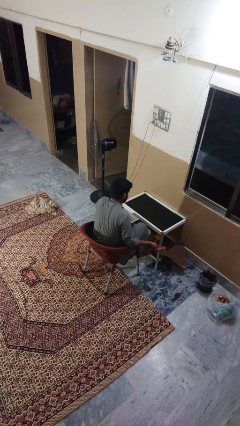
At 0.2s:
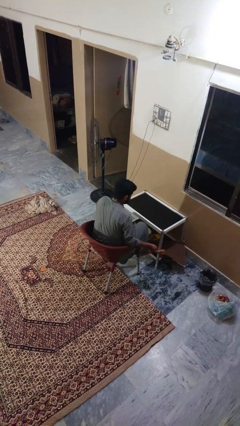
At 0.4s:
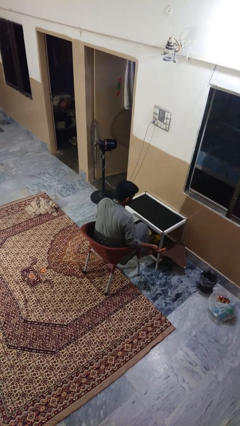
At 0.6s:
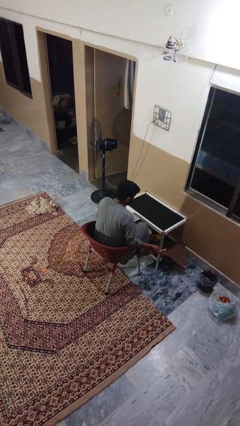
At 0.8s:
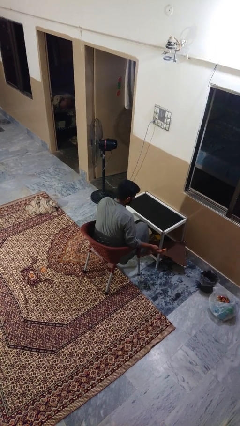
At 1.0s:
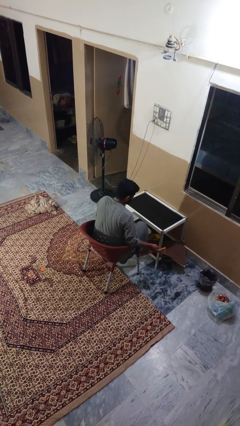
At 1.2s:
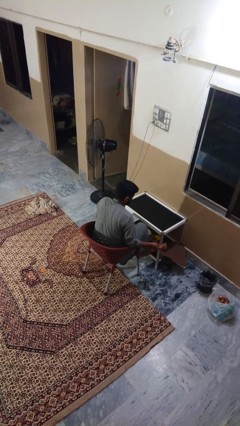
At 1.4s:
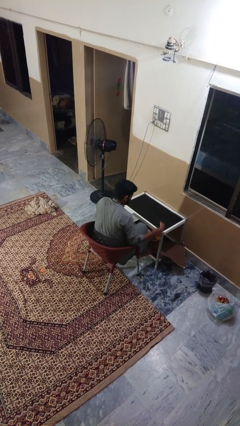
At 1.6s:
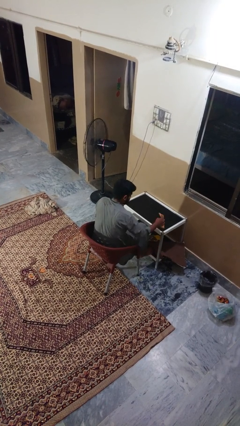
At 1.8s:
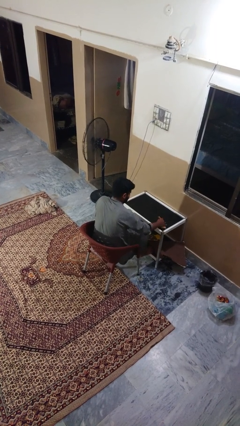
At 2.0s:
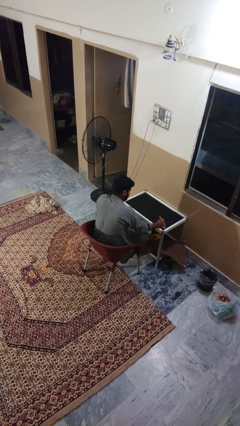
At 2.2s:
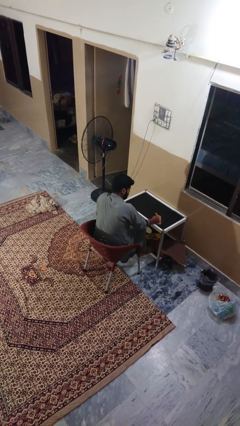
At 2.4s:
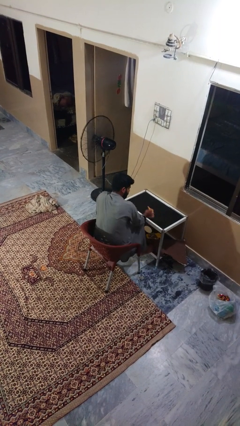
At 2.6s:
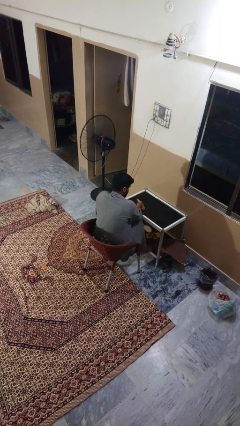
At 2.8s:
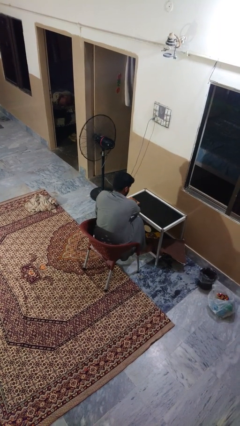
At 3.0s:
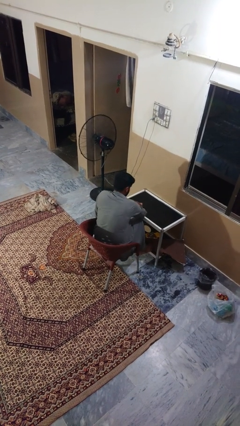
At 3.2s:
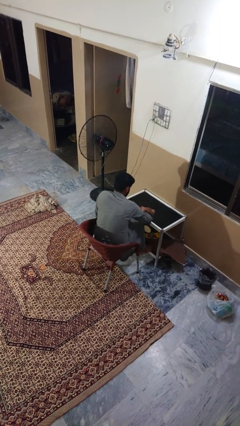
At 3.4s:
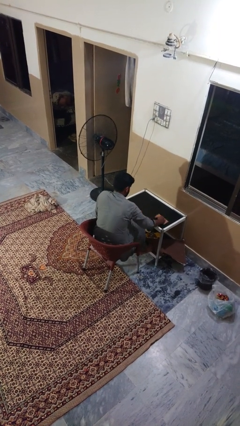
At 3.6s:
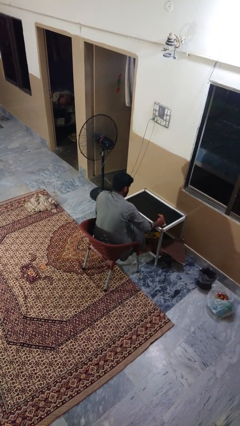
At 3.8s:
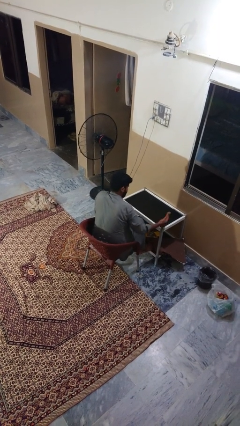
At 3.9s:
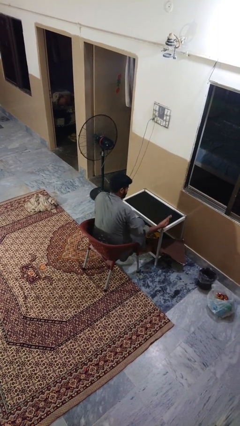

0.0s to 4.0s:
person cleans table with rag

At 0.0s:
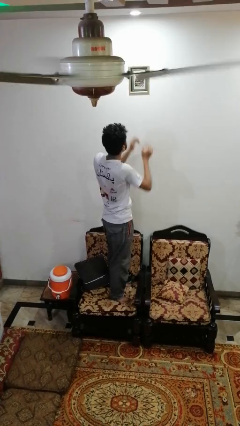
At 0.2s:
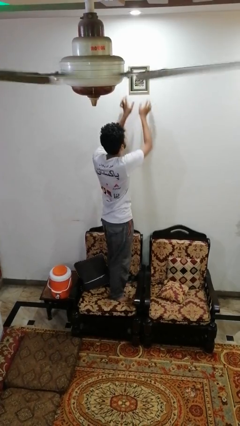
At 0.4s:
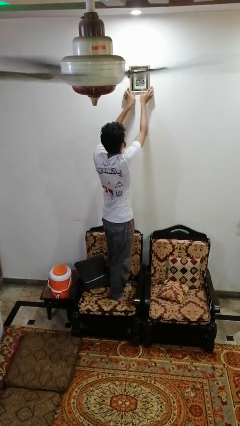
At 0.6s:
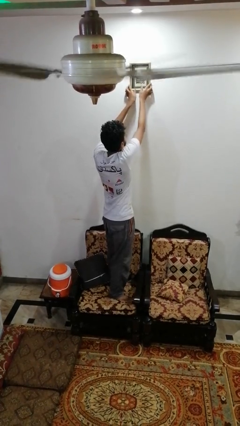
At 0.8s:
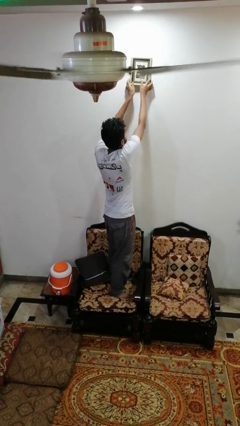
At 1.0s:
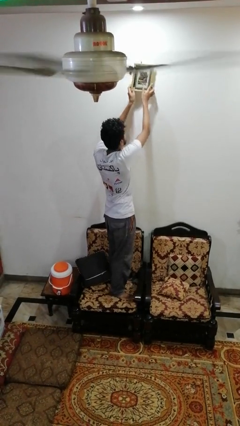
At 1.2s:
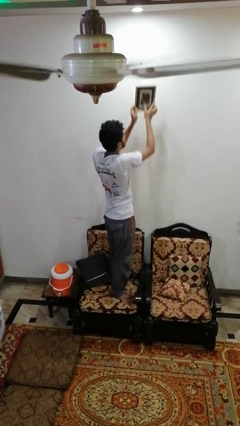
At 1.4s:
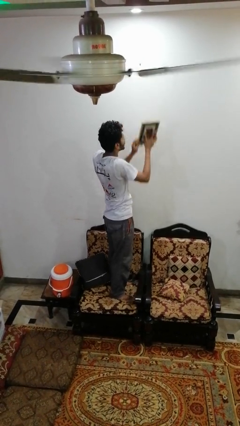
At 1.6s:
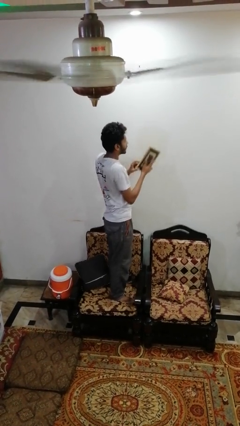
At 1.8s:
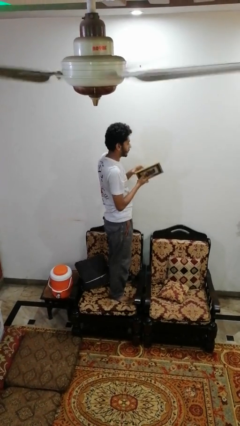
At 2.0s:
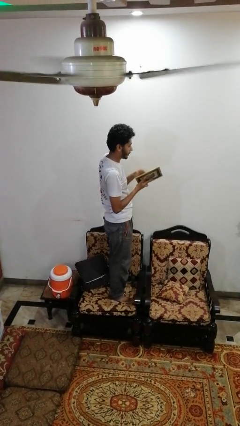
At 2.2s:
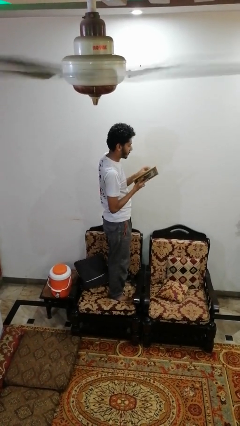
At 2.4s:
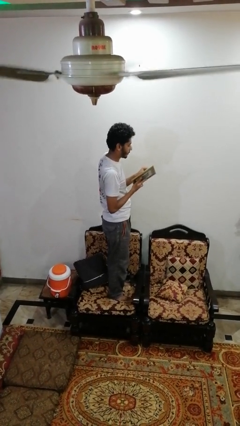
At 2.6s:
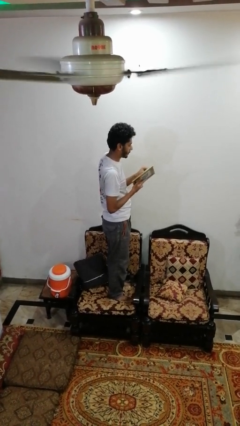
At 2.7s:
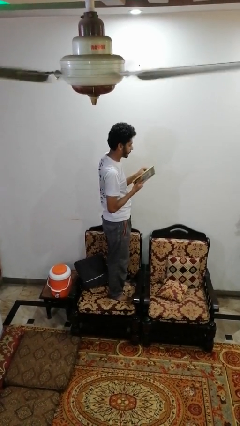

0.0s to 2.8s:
person takes down picture frame

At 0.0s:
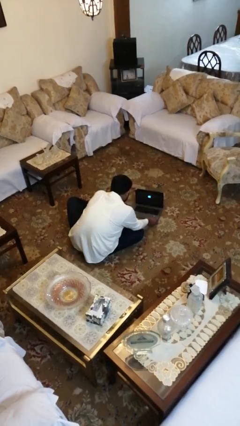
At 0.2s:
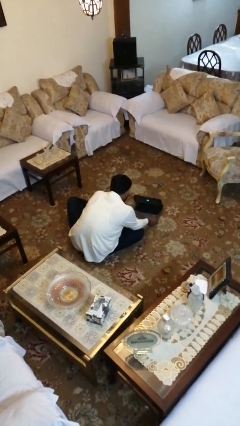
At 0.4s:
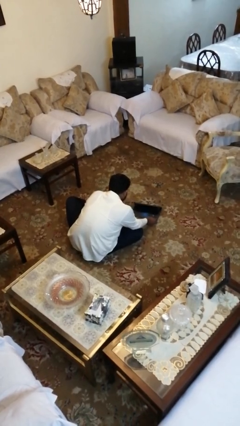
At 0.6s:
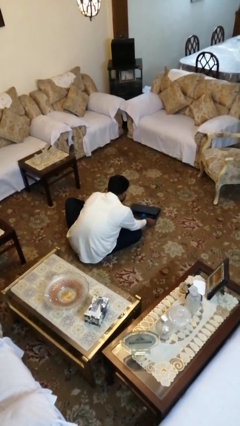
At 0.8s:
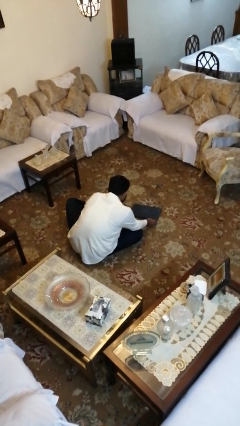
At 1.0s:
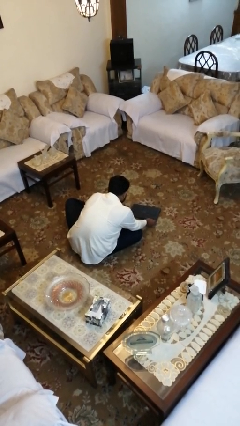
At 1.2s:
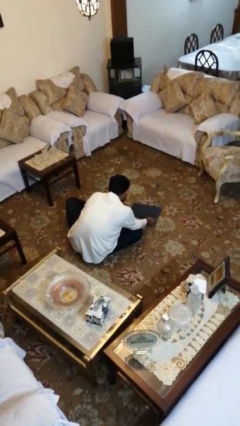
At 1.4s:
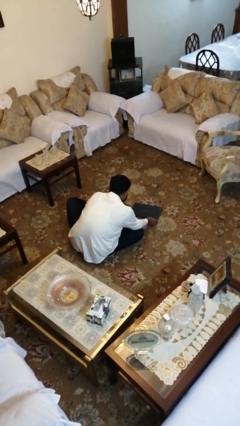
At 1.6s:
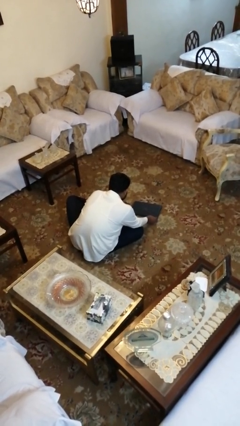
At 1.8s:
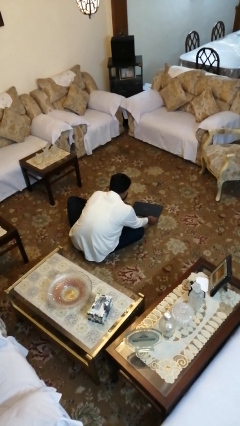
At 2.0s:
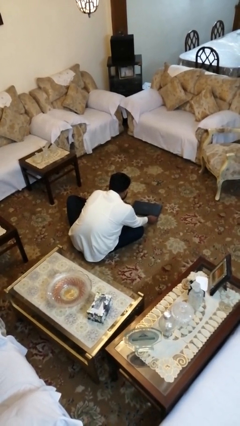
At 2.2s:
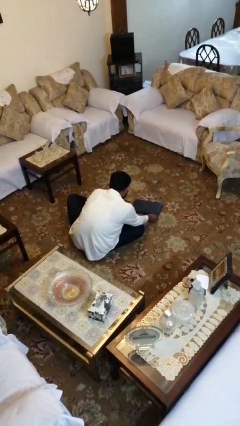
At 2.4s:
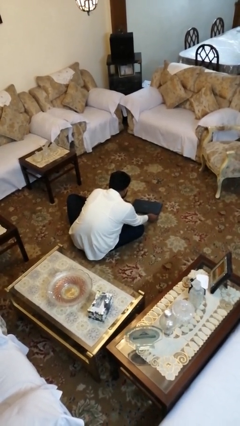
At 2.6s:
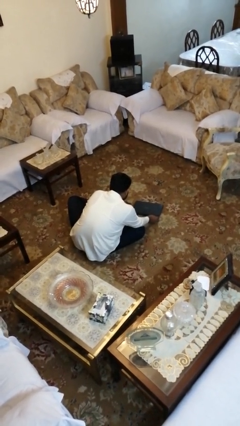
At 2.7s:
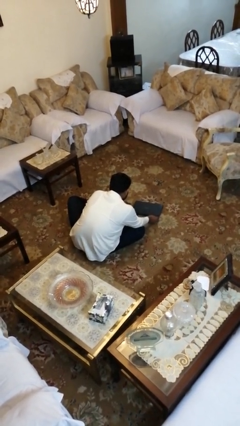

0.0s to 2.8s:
person closes laptop

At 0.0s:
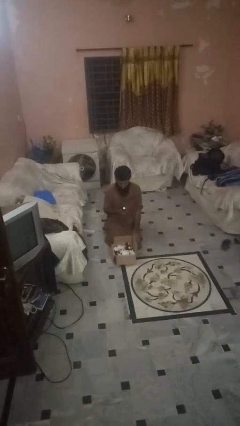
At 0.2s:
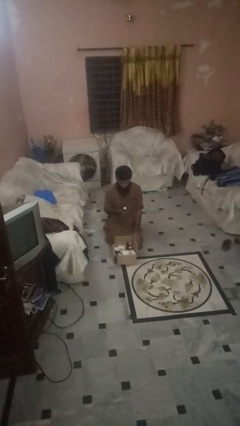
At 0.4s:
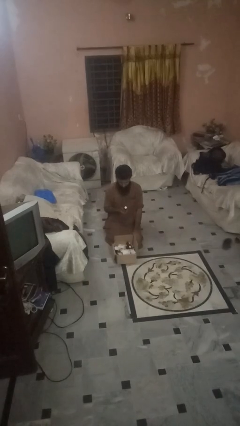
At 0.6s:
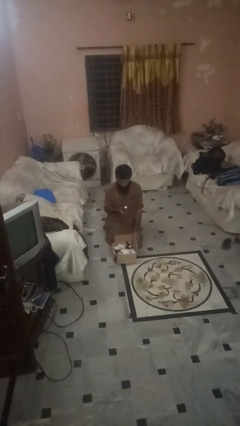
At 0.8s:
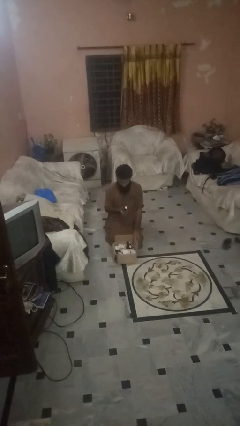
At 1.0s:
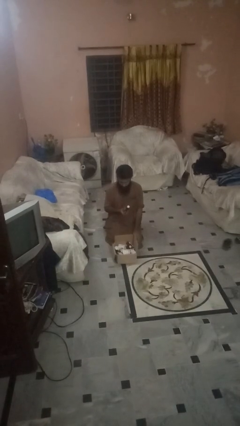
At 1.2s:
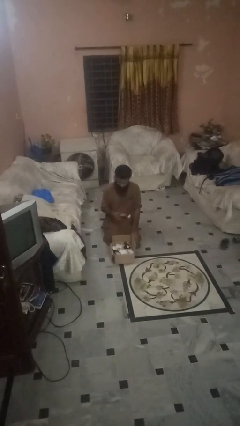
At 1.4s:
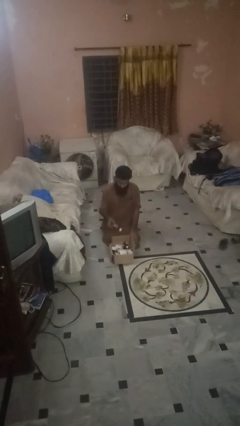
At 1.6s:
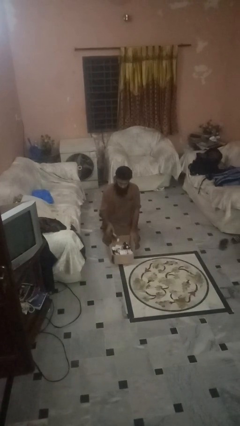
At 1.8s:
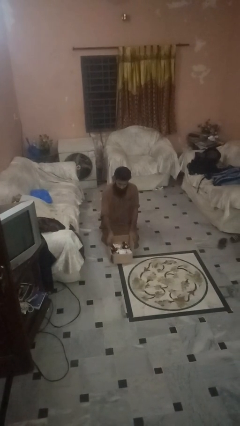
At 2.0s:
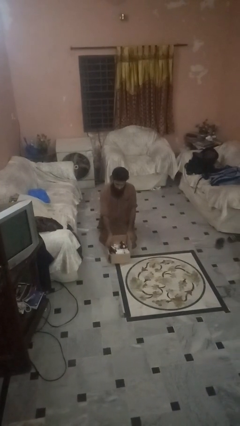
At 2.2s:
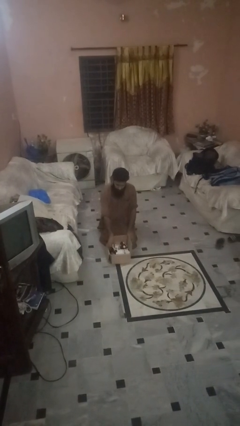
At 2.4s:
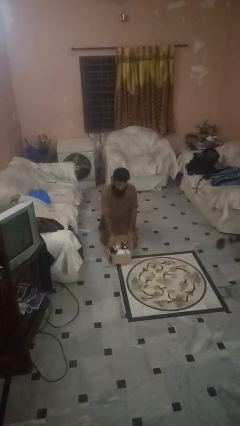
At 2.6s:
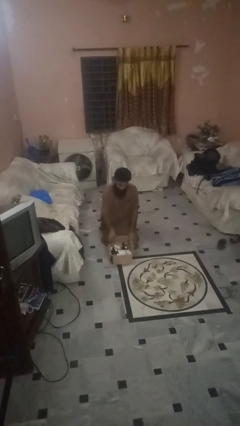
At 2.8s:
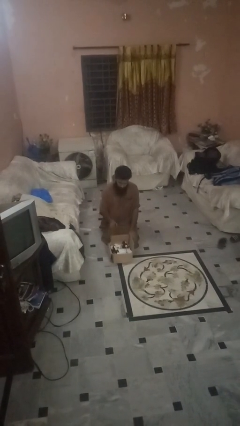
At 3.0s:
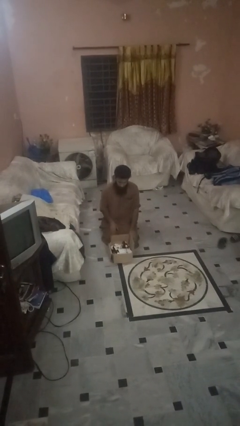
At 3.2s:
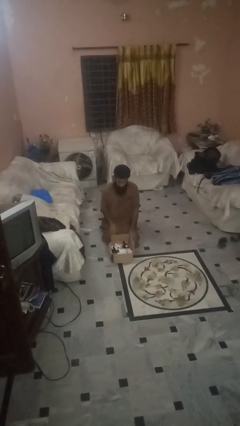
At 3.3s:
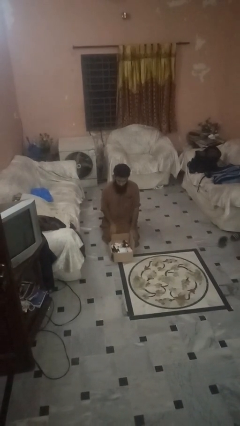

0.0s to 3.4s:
person puts object into box

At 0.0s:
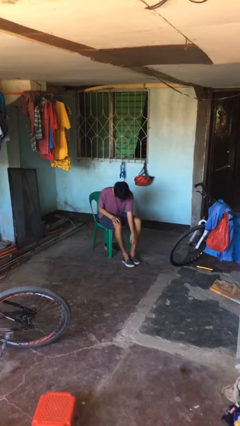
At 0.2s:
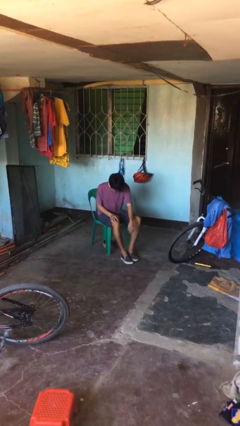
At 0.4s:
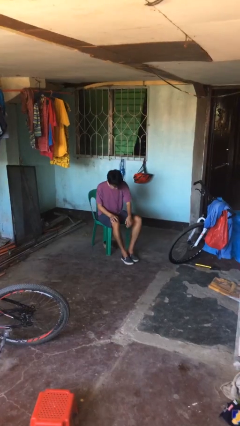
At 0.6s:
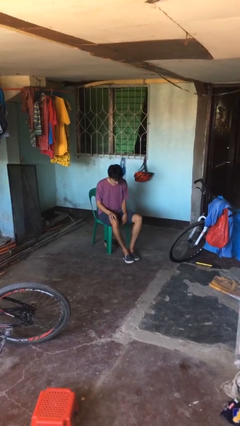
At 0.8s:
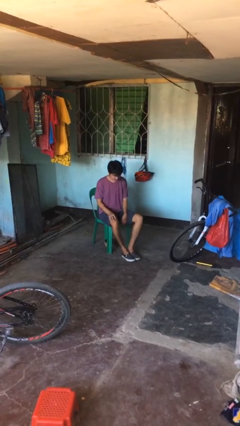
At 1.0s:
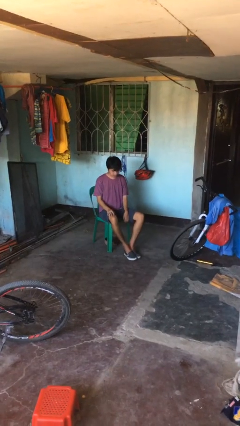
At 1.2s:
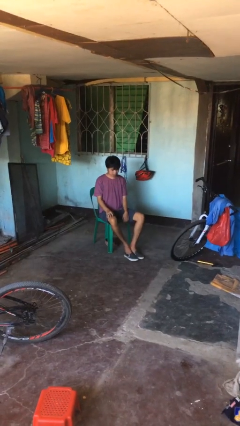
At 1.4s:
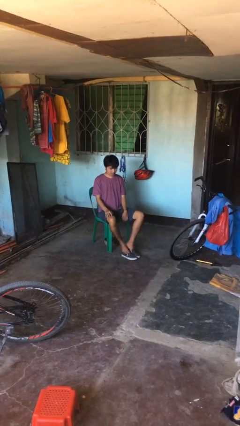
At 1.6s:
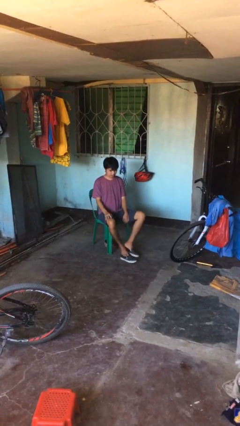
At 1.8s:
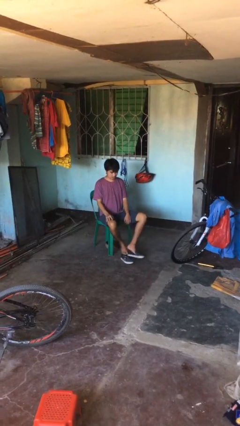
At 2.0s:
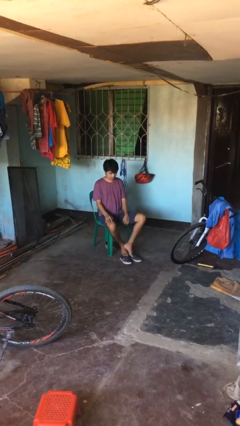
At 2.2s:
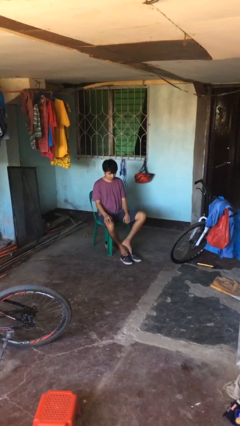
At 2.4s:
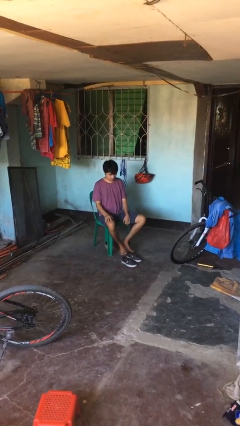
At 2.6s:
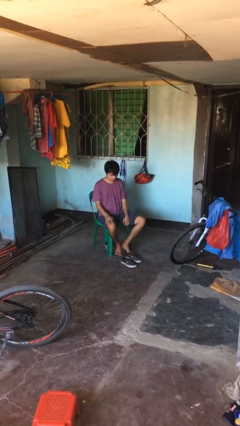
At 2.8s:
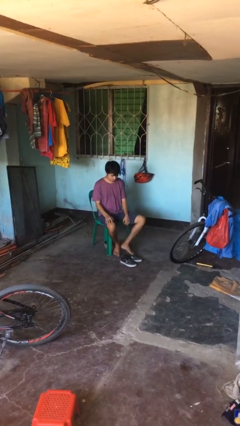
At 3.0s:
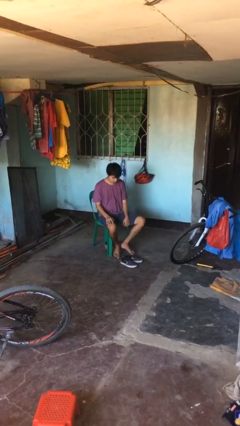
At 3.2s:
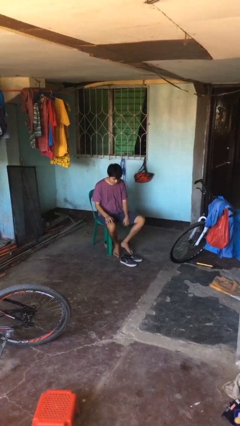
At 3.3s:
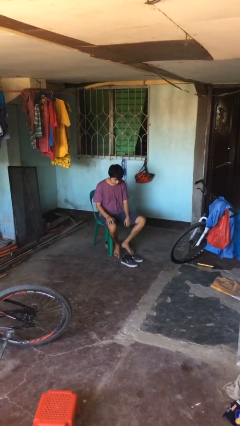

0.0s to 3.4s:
person takes off shoes

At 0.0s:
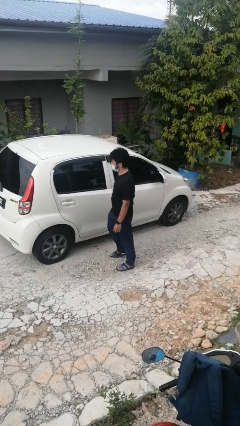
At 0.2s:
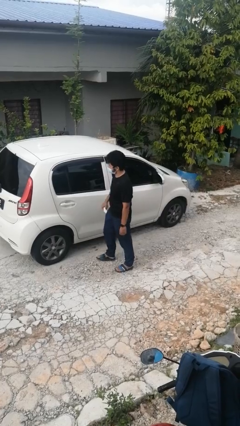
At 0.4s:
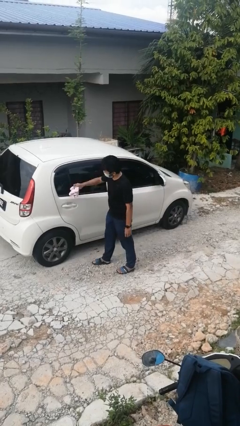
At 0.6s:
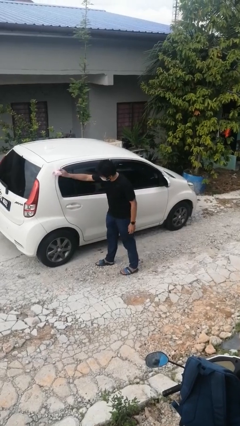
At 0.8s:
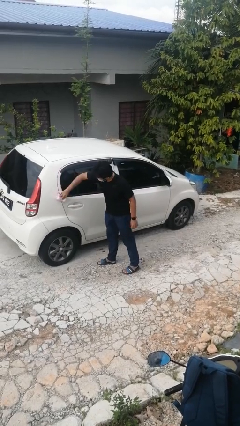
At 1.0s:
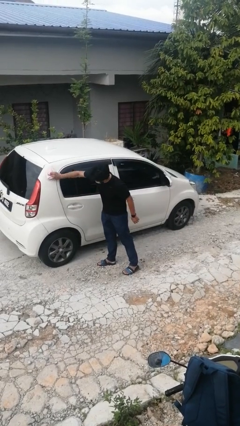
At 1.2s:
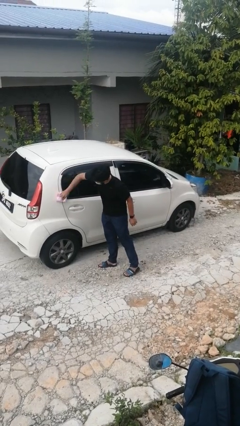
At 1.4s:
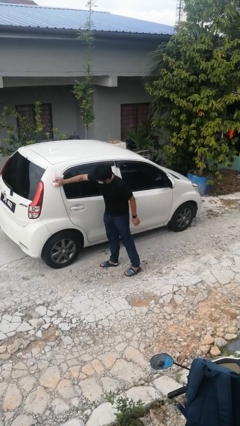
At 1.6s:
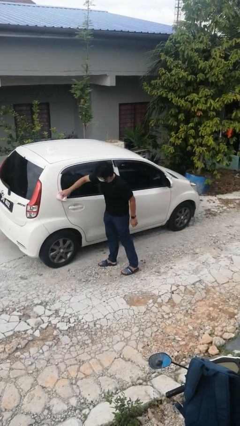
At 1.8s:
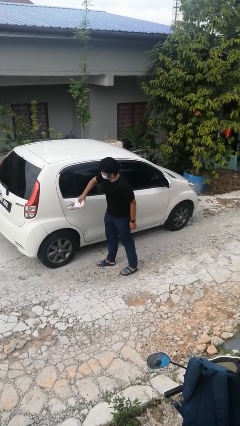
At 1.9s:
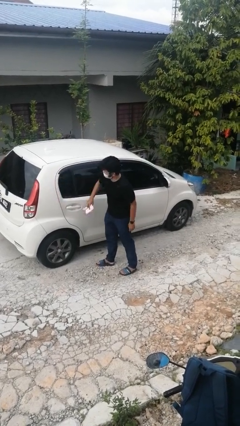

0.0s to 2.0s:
person polishes car with rag
